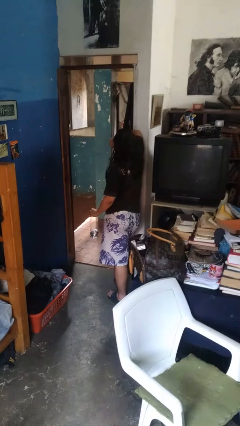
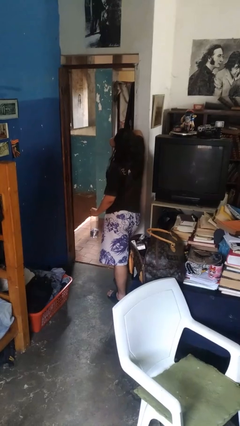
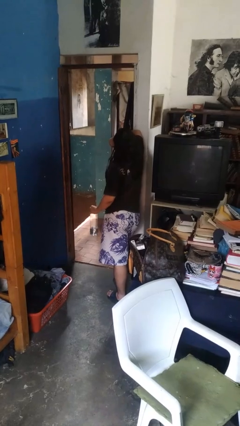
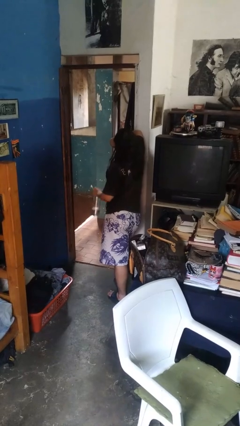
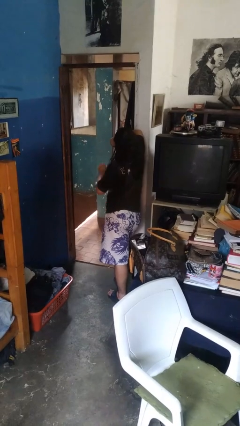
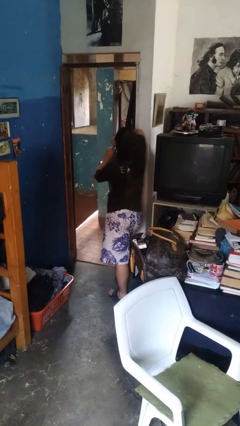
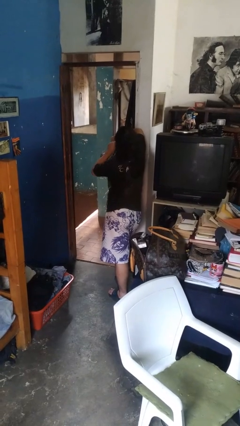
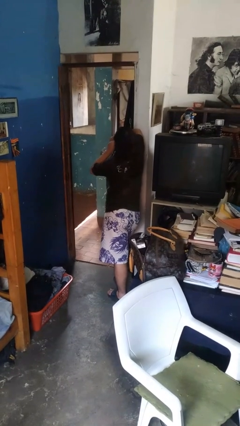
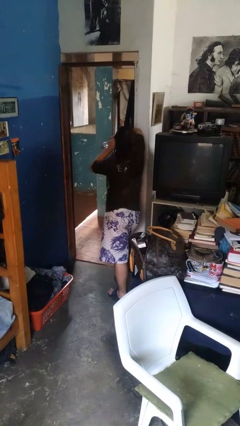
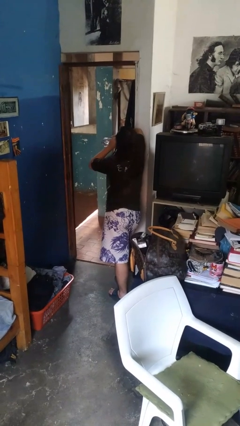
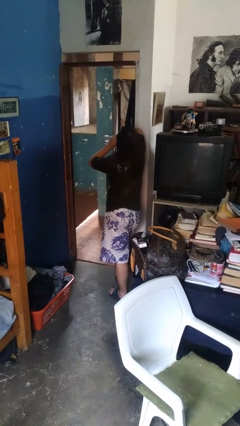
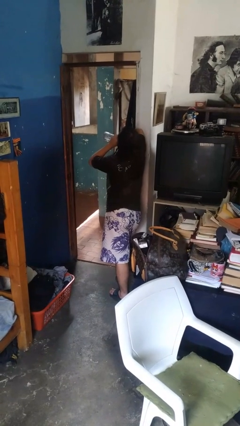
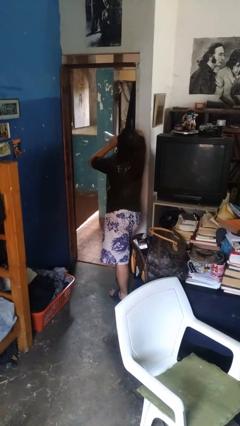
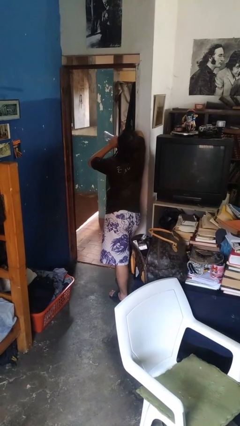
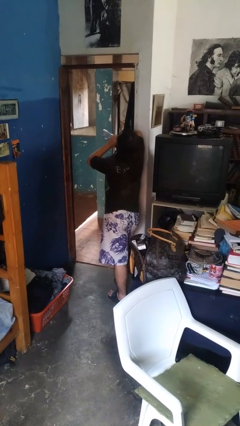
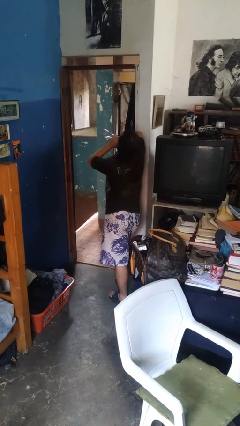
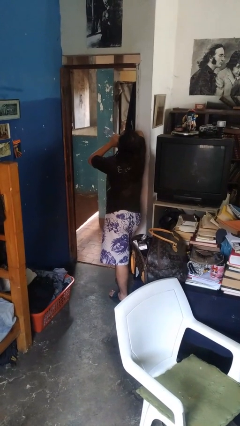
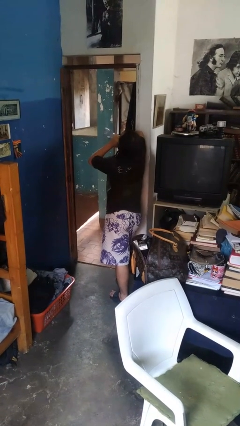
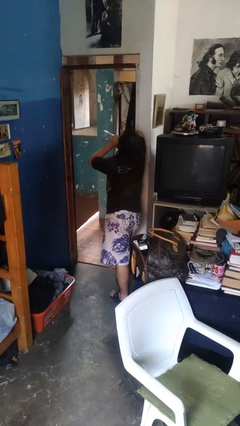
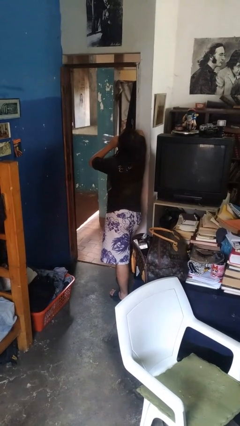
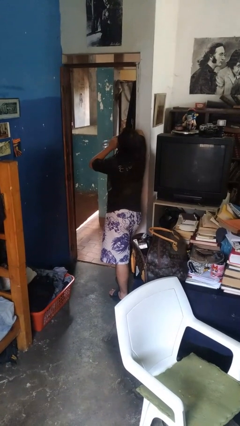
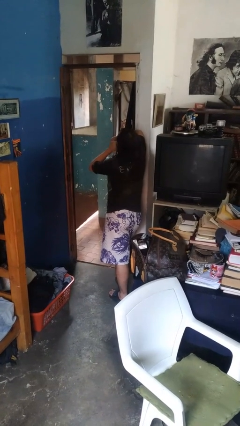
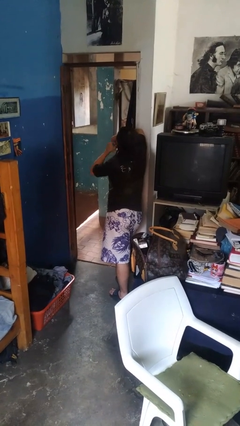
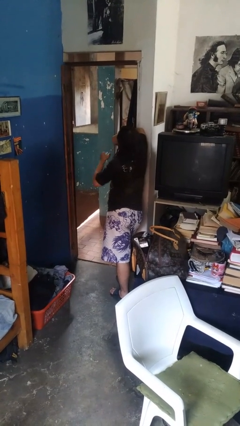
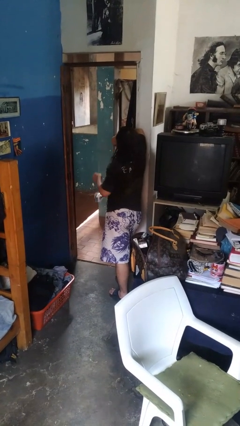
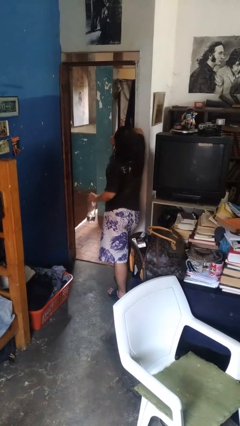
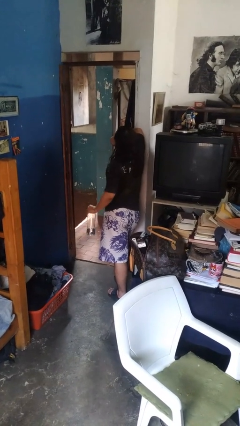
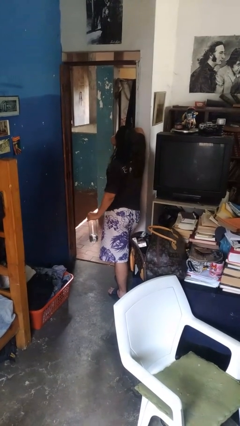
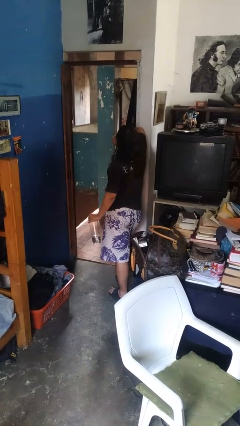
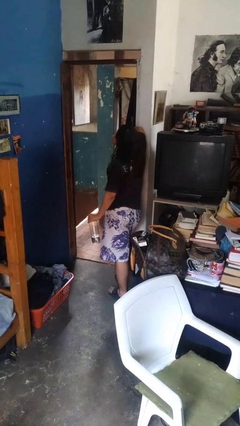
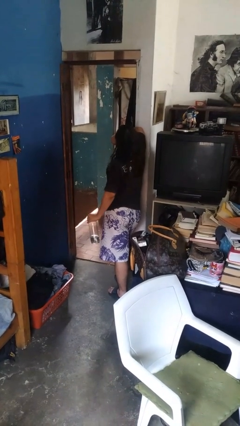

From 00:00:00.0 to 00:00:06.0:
person drinks from bottle

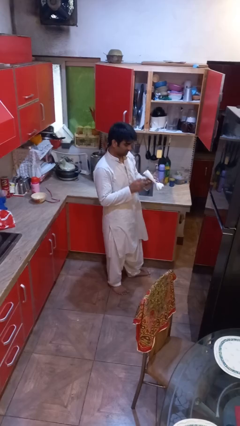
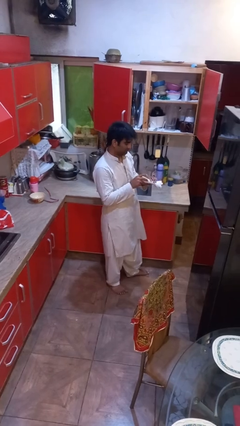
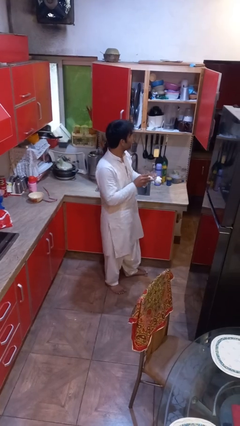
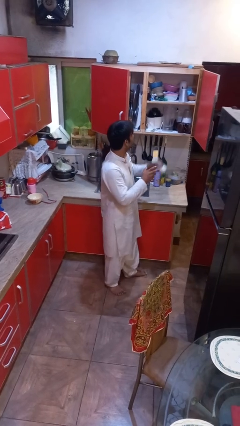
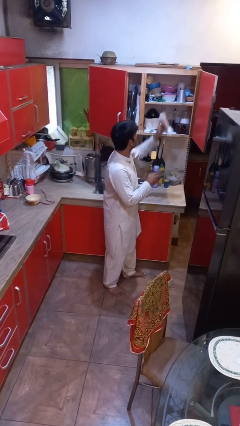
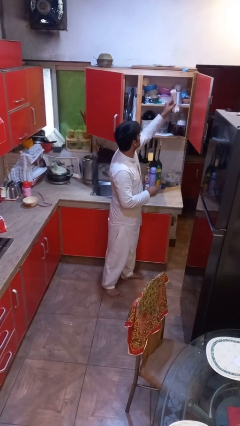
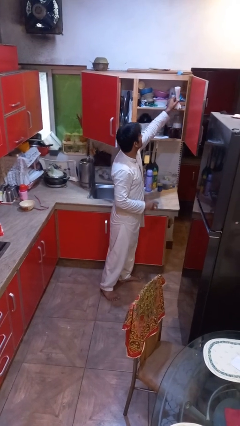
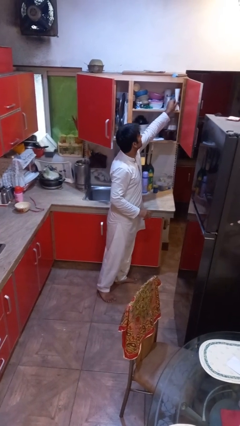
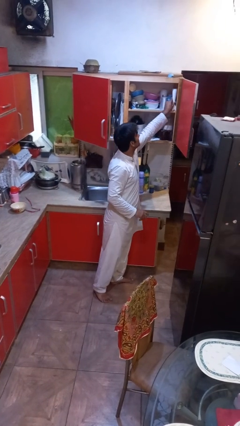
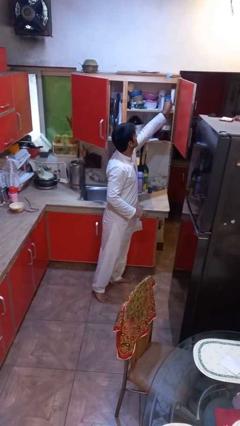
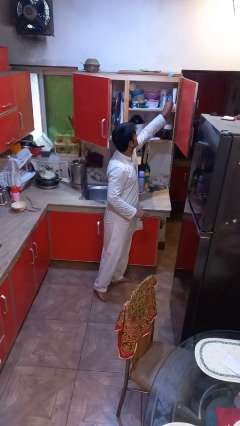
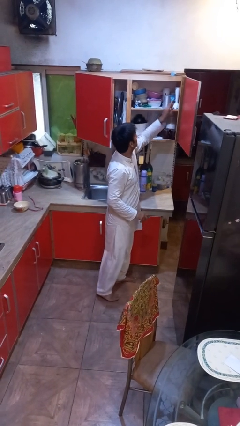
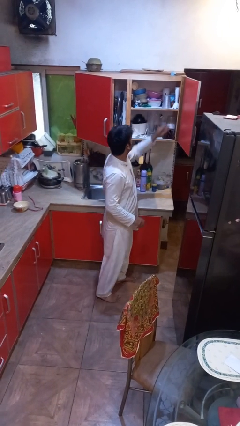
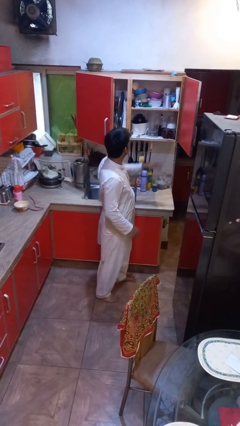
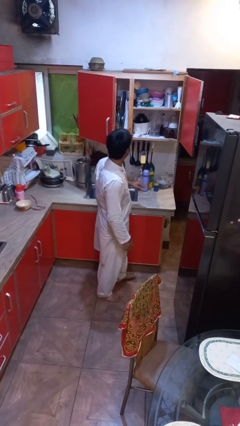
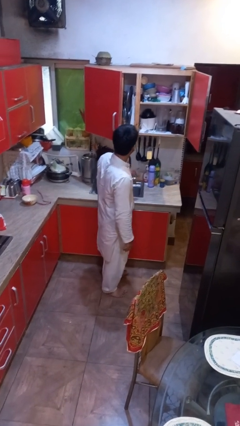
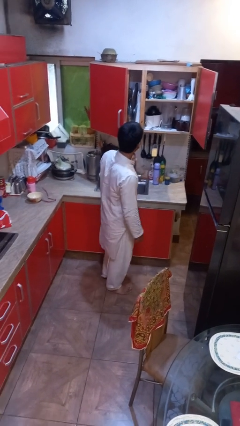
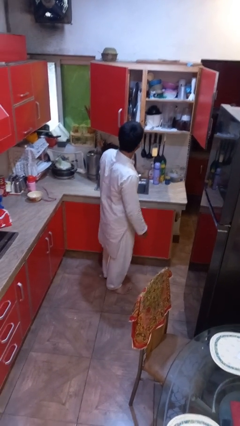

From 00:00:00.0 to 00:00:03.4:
person puts down object into cabinet

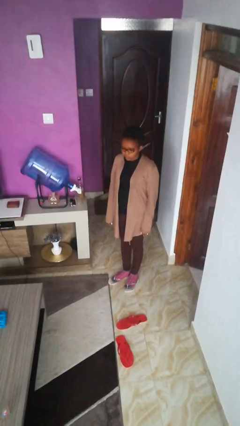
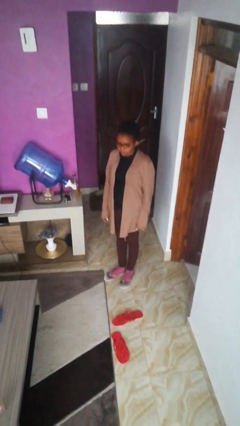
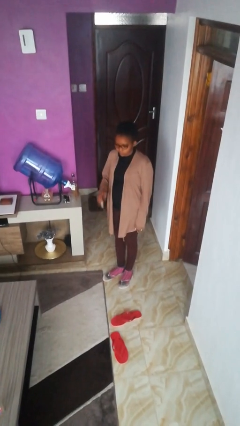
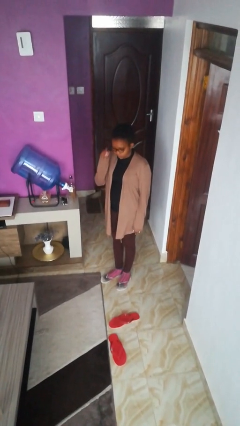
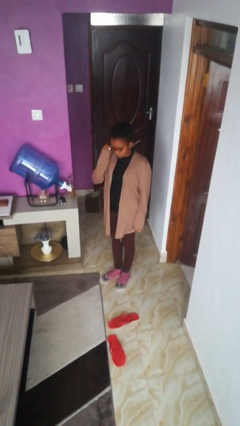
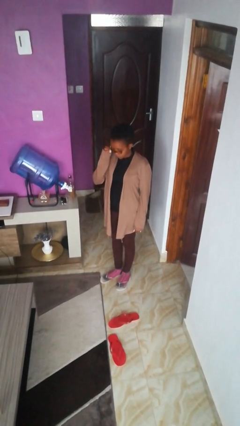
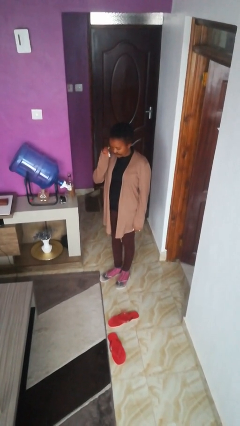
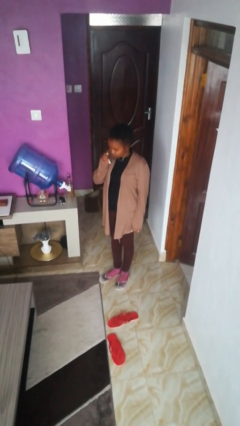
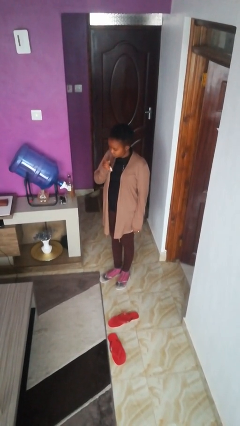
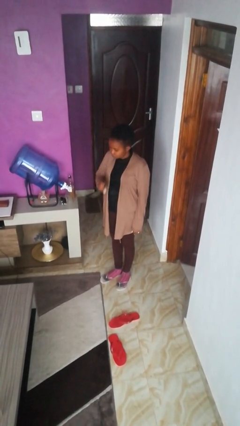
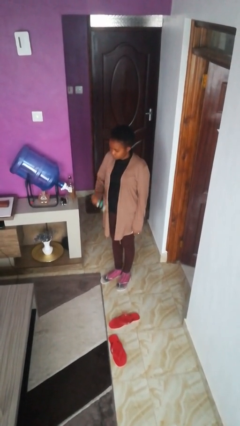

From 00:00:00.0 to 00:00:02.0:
person takes off glasses

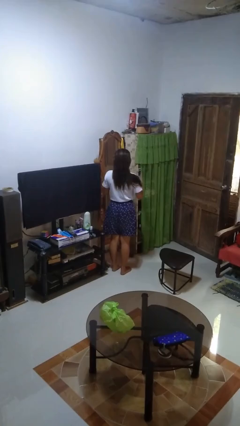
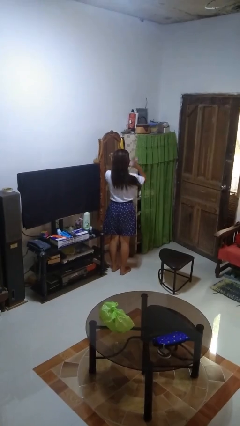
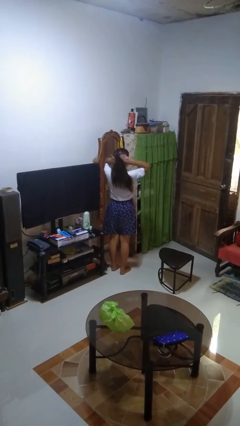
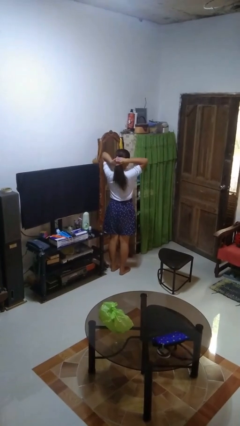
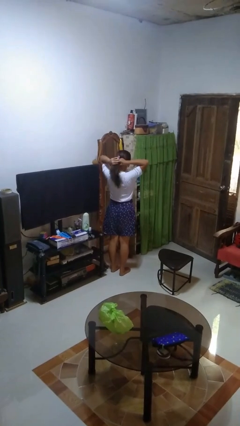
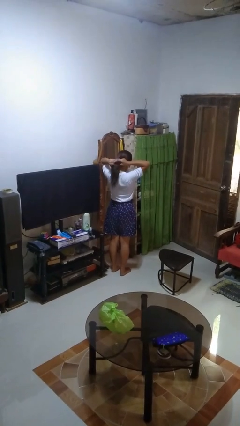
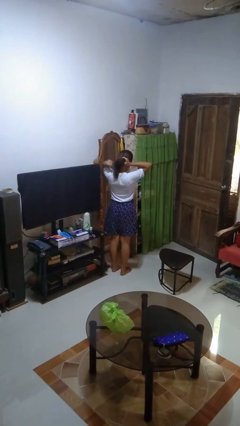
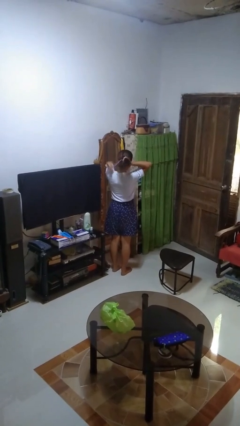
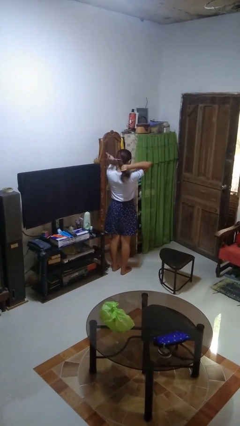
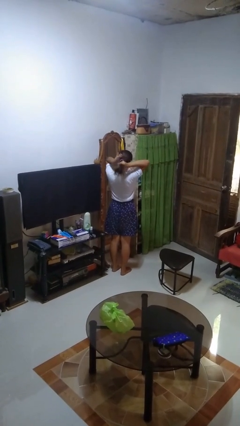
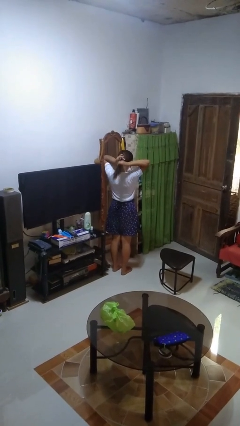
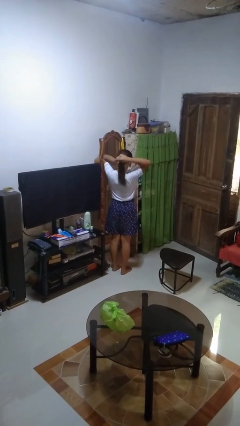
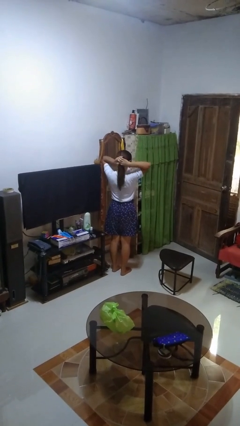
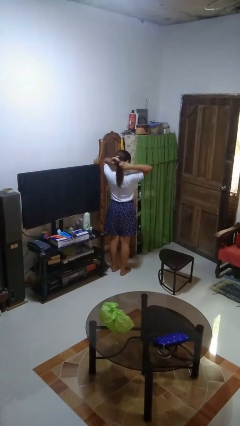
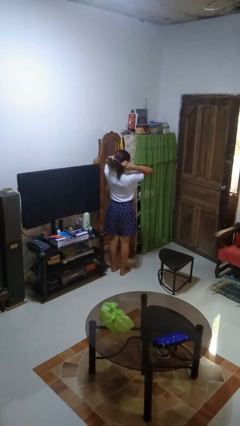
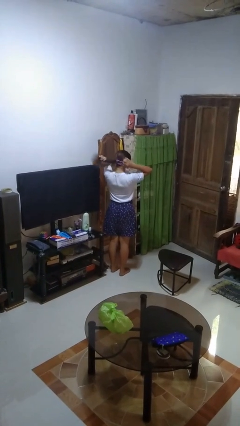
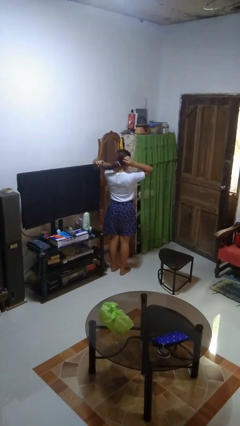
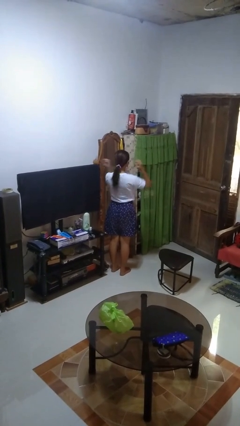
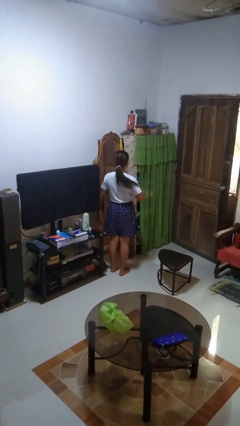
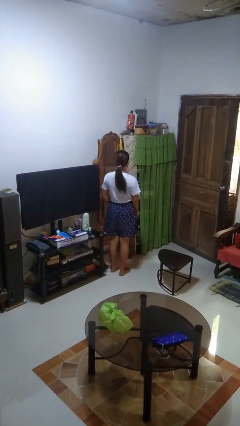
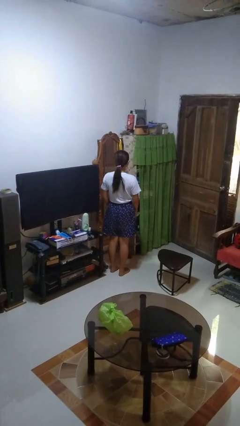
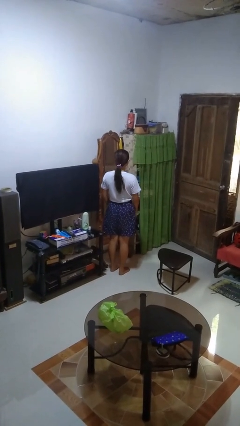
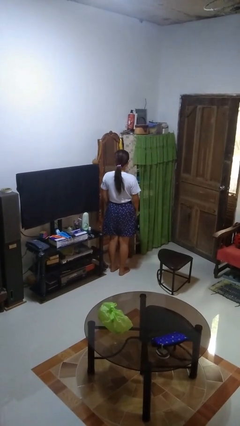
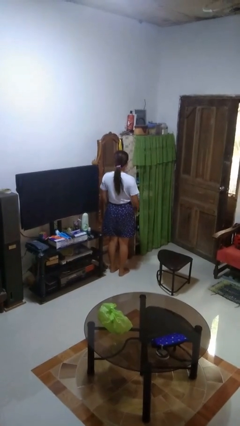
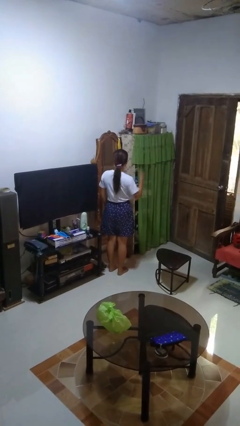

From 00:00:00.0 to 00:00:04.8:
person puts hair in ponytail

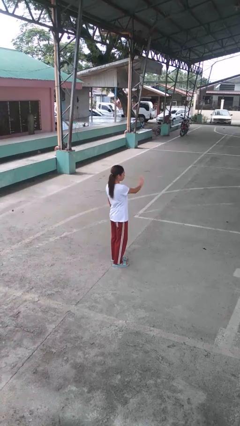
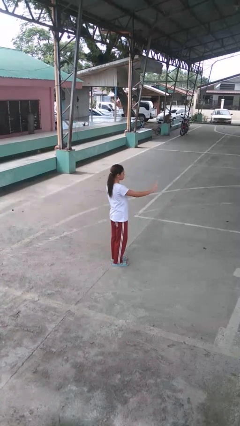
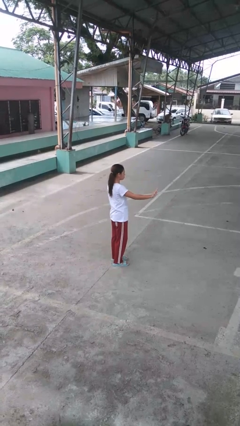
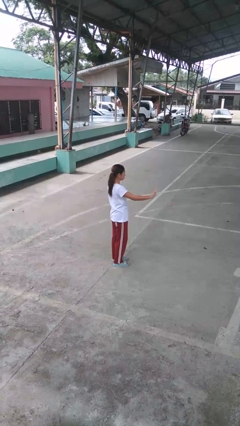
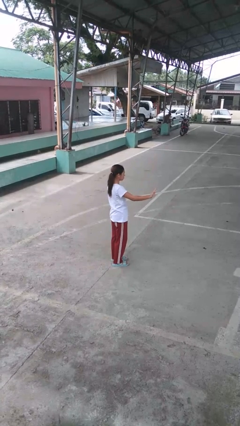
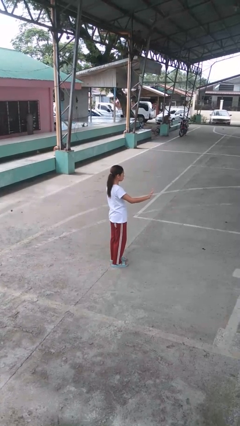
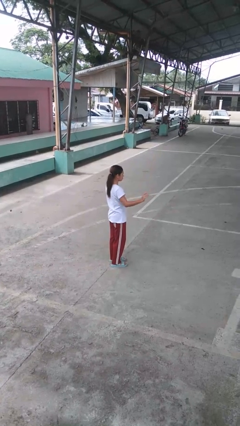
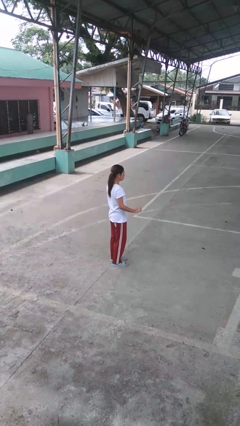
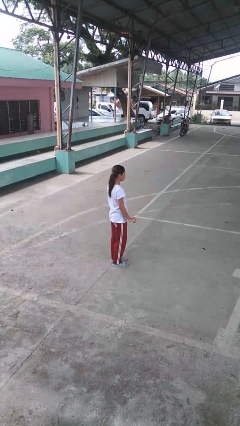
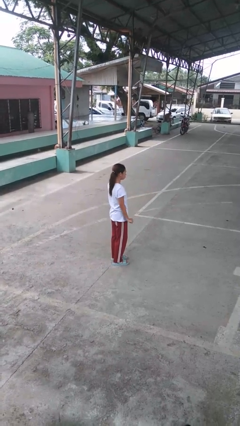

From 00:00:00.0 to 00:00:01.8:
person gestures swipe right
